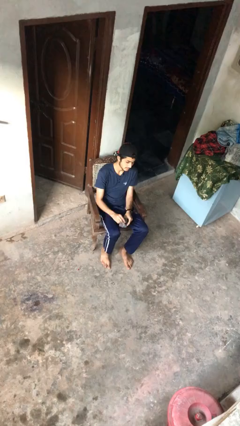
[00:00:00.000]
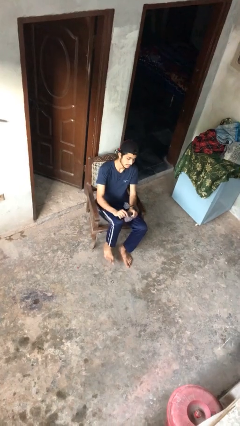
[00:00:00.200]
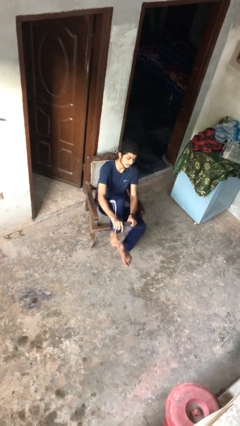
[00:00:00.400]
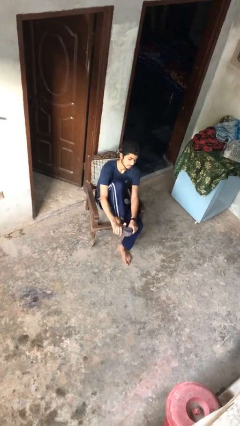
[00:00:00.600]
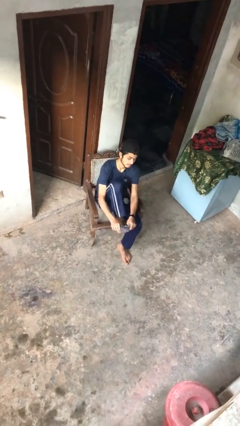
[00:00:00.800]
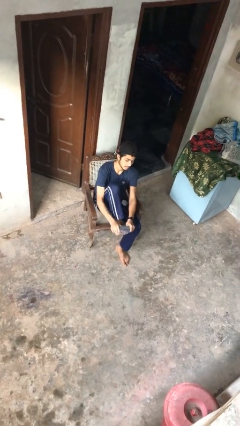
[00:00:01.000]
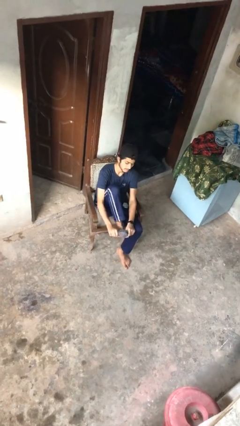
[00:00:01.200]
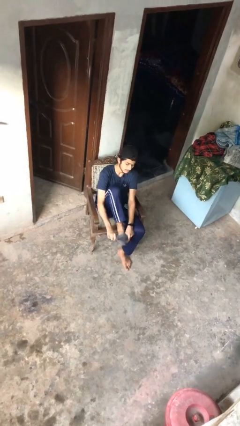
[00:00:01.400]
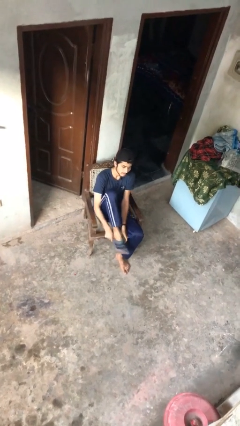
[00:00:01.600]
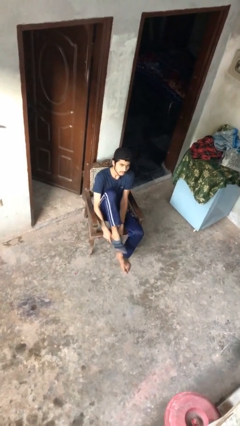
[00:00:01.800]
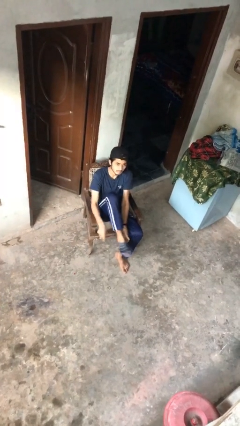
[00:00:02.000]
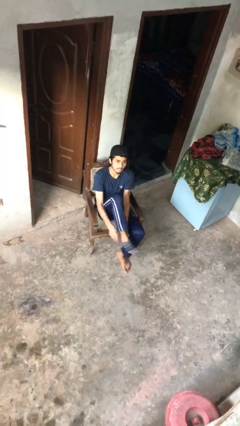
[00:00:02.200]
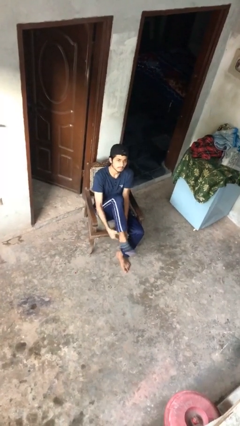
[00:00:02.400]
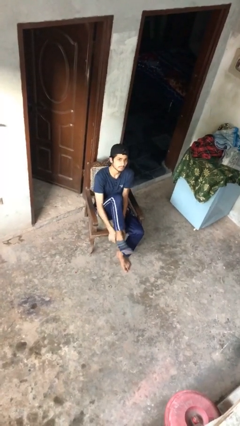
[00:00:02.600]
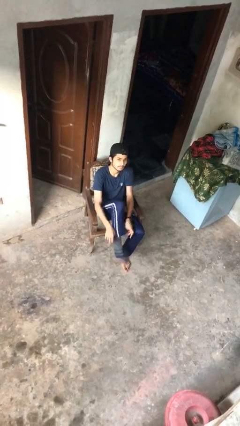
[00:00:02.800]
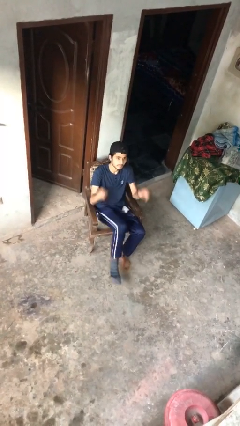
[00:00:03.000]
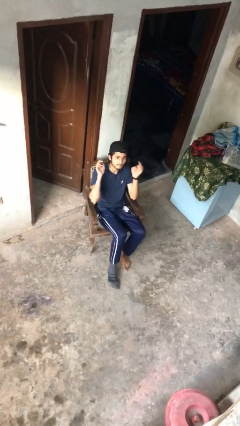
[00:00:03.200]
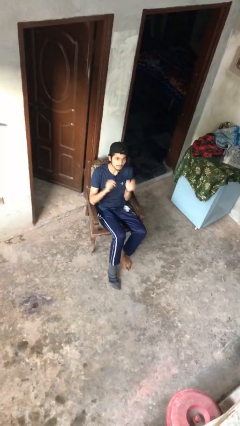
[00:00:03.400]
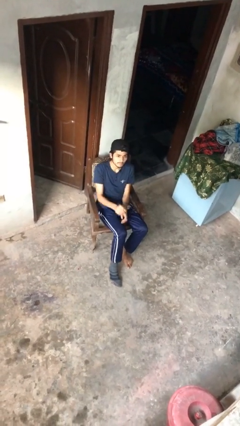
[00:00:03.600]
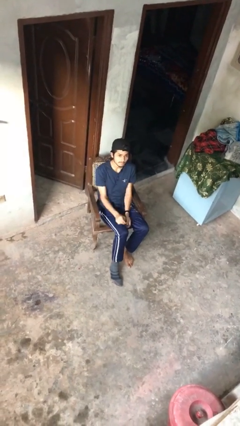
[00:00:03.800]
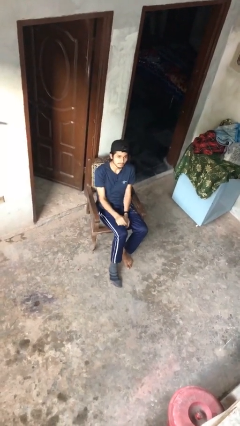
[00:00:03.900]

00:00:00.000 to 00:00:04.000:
person puts on socks

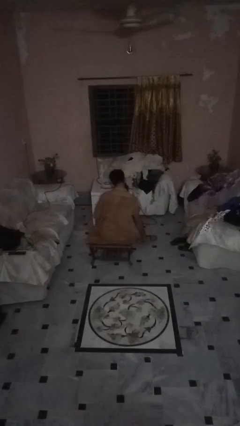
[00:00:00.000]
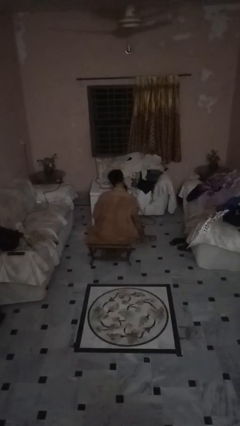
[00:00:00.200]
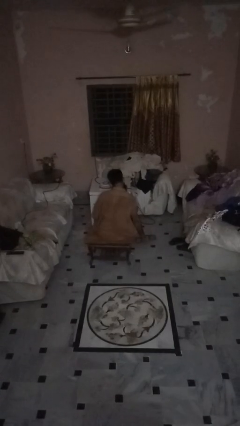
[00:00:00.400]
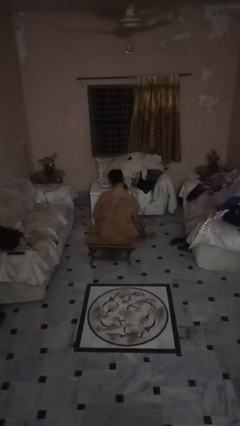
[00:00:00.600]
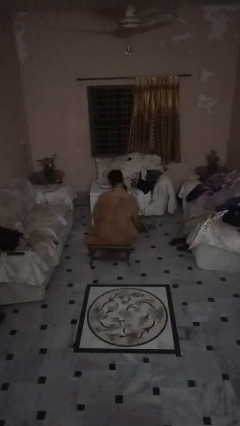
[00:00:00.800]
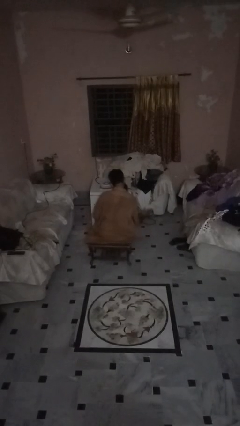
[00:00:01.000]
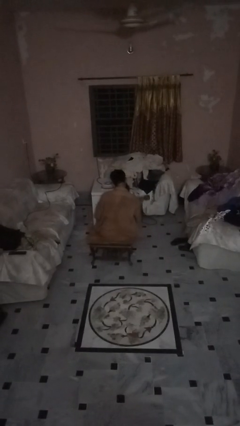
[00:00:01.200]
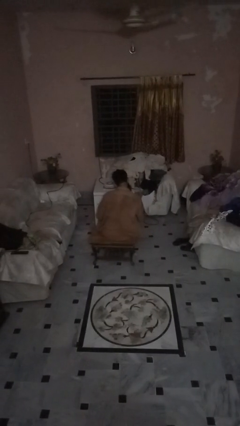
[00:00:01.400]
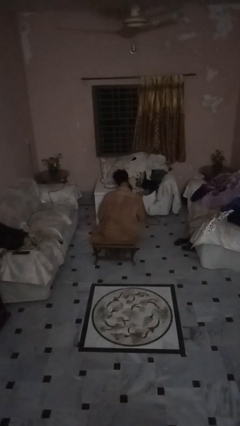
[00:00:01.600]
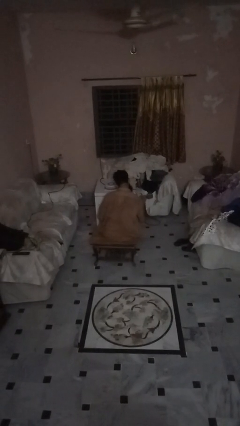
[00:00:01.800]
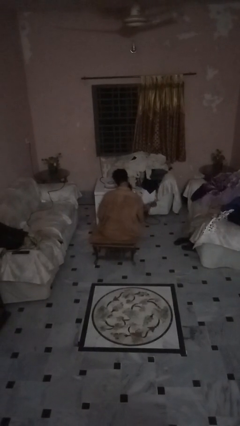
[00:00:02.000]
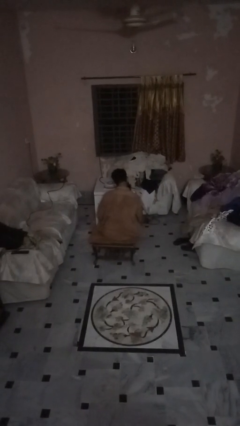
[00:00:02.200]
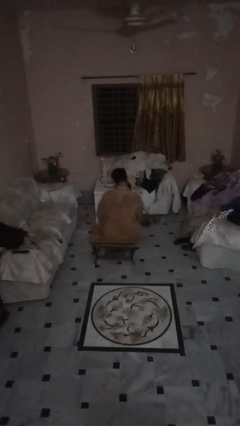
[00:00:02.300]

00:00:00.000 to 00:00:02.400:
person lifts dumbbells

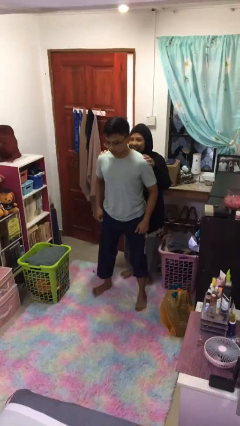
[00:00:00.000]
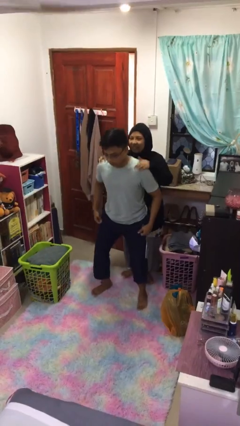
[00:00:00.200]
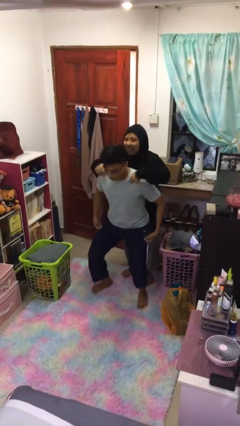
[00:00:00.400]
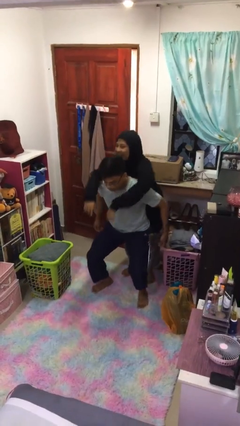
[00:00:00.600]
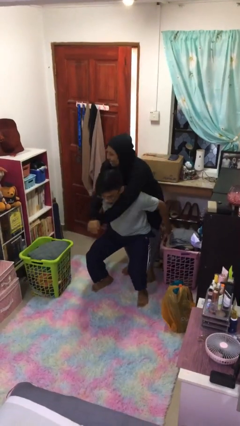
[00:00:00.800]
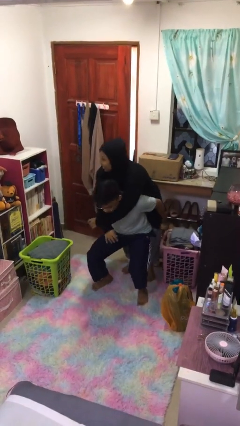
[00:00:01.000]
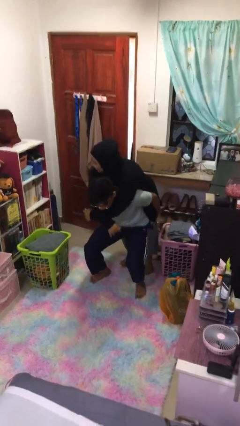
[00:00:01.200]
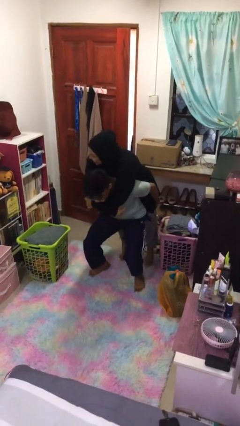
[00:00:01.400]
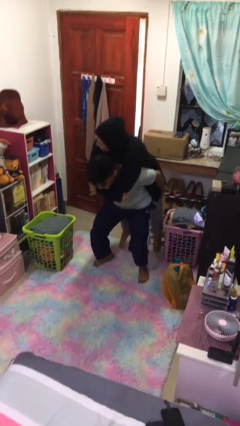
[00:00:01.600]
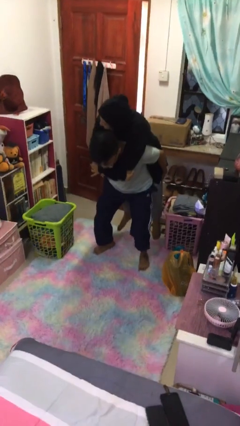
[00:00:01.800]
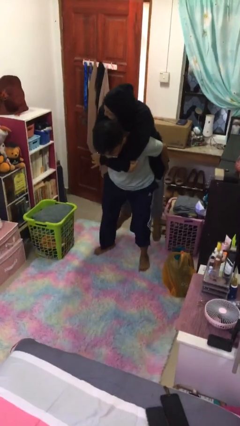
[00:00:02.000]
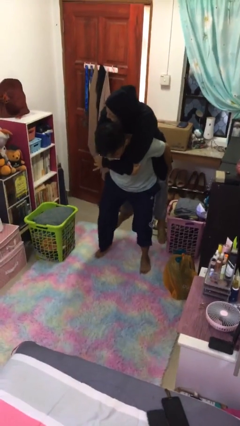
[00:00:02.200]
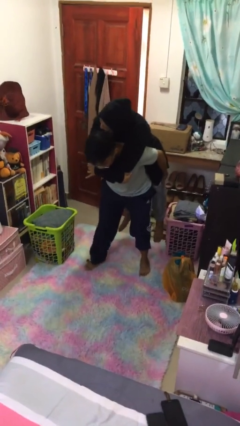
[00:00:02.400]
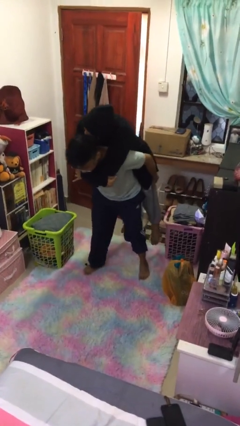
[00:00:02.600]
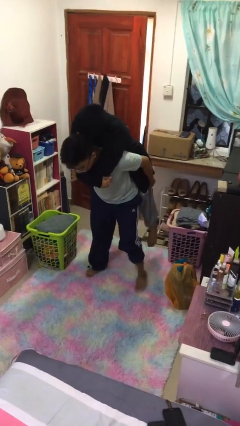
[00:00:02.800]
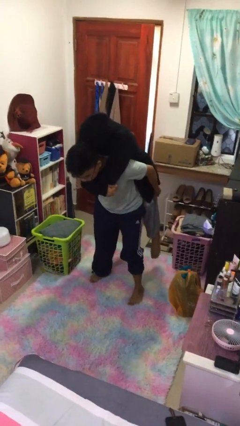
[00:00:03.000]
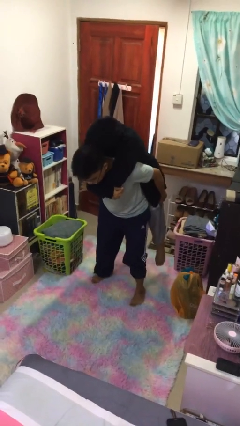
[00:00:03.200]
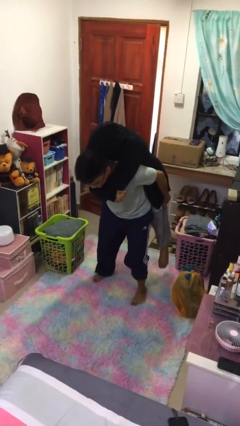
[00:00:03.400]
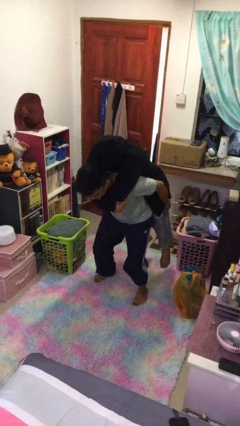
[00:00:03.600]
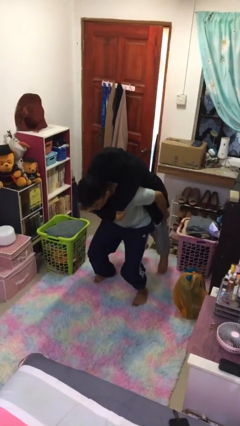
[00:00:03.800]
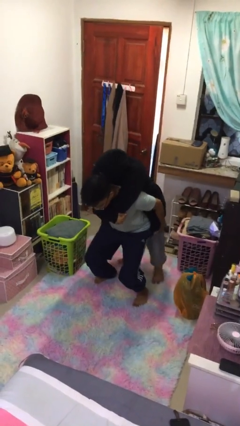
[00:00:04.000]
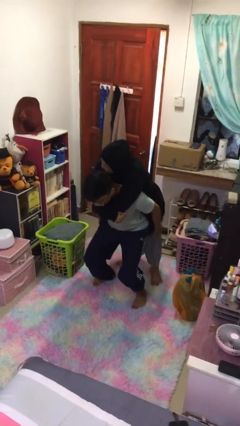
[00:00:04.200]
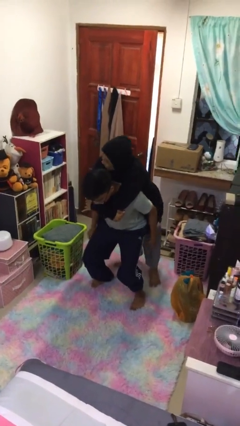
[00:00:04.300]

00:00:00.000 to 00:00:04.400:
person carries person on back

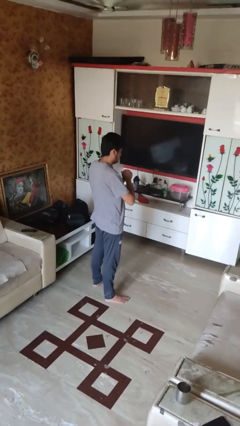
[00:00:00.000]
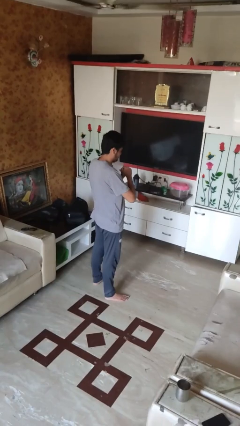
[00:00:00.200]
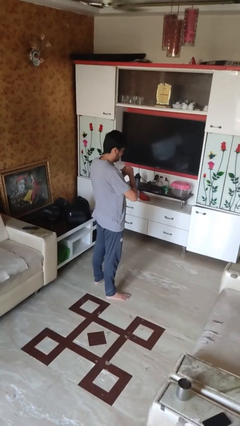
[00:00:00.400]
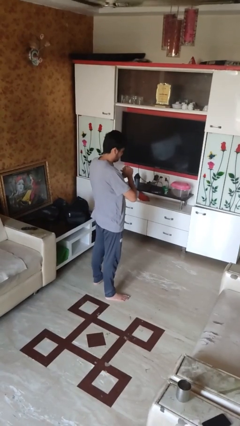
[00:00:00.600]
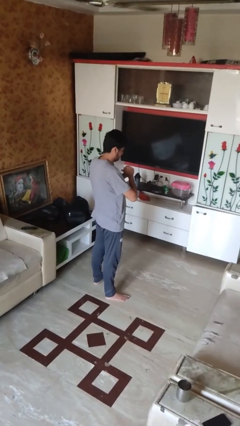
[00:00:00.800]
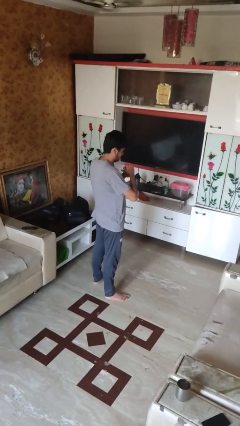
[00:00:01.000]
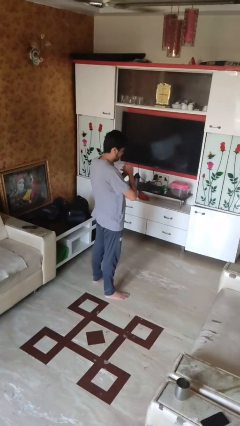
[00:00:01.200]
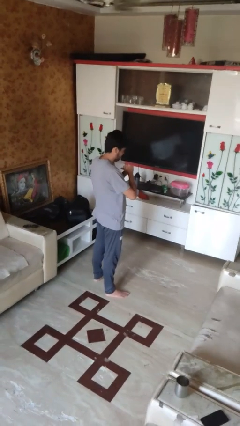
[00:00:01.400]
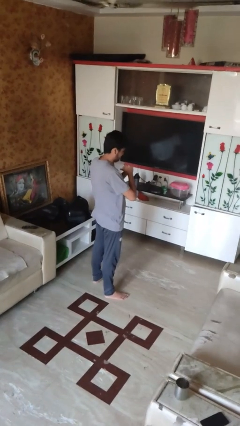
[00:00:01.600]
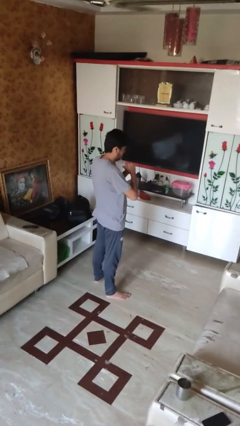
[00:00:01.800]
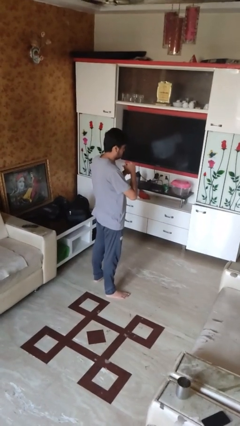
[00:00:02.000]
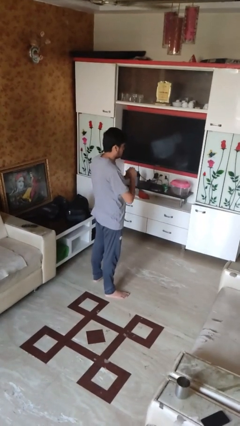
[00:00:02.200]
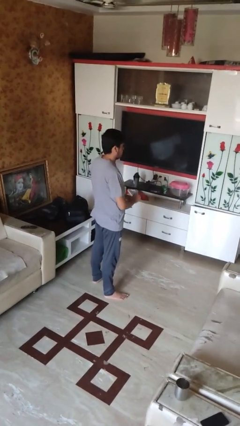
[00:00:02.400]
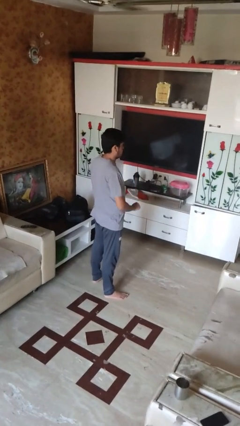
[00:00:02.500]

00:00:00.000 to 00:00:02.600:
person cracks knuckles

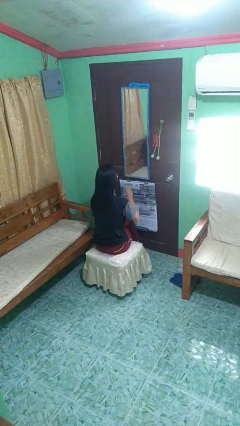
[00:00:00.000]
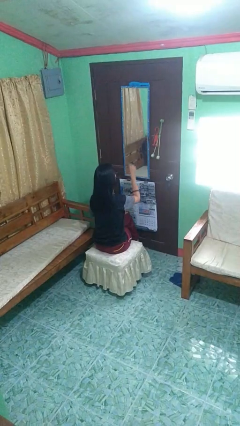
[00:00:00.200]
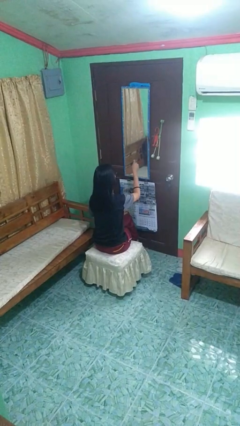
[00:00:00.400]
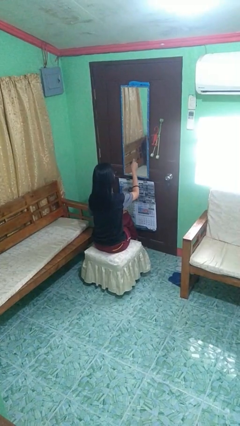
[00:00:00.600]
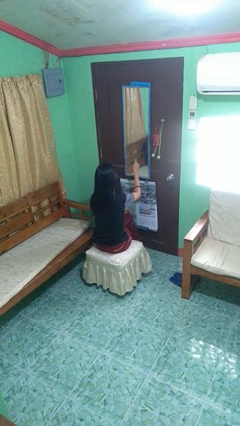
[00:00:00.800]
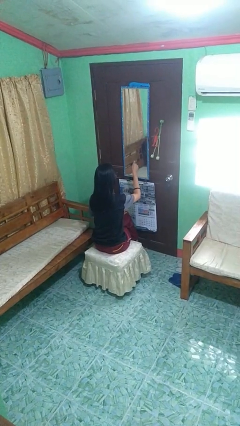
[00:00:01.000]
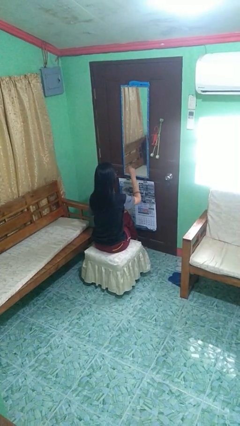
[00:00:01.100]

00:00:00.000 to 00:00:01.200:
person gestures thumbs up

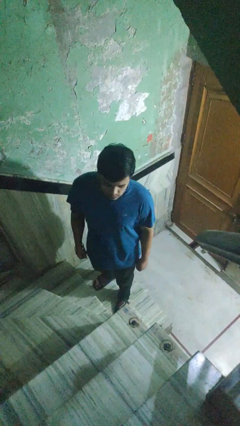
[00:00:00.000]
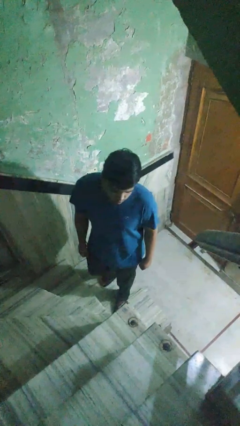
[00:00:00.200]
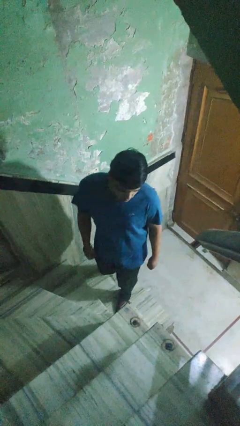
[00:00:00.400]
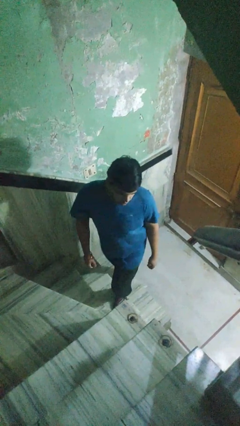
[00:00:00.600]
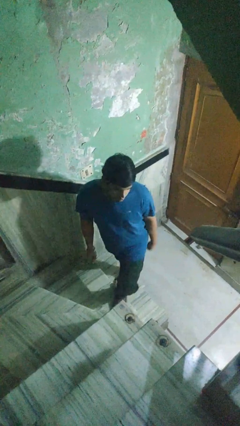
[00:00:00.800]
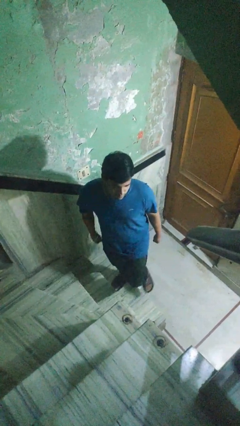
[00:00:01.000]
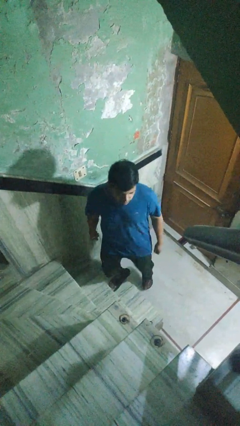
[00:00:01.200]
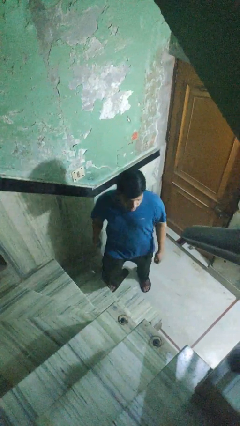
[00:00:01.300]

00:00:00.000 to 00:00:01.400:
person climbs down stairs

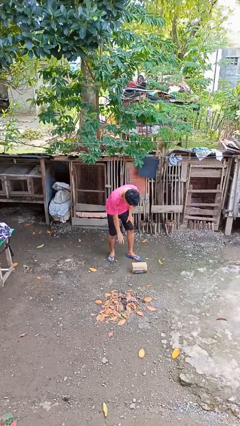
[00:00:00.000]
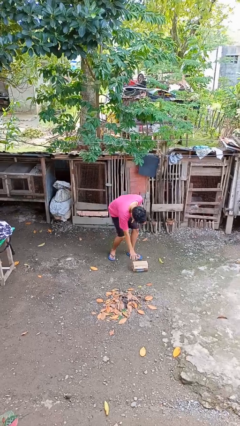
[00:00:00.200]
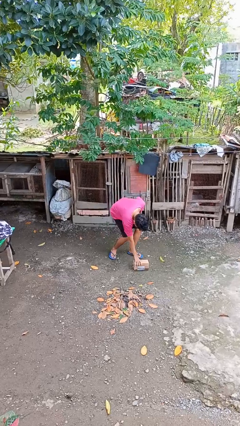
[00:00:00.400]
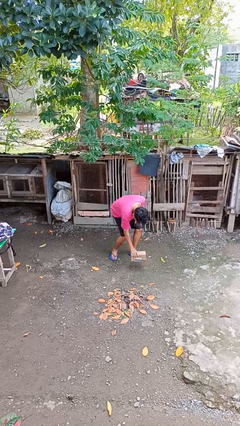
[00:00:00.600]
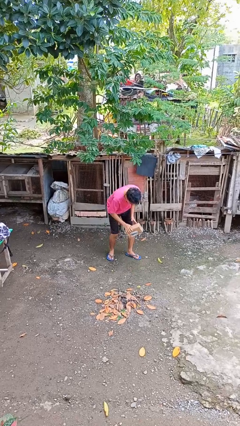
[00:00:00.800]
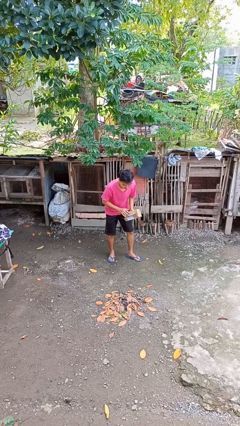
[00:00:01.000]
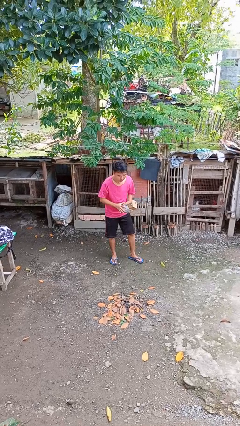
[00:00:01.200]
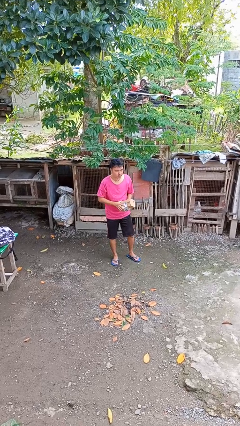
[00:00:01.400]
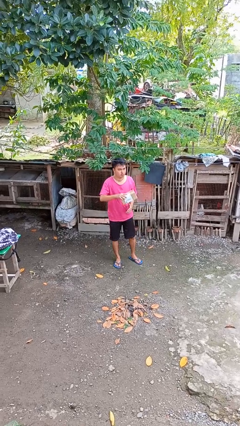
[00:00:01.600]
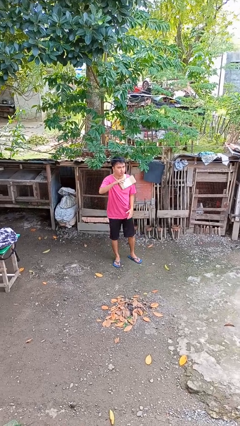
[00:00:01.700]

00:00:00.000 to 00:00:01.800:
person picks up object from floor
